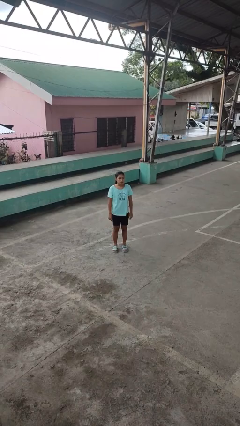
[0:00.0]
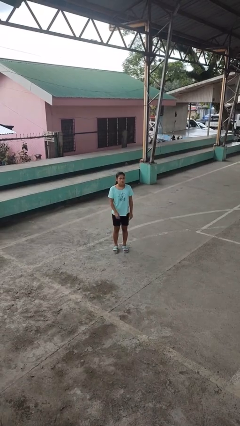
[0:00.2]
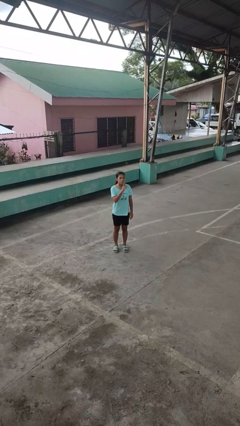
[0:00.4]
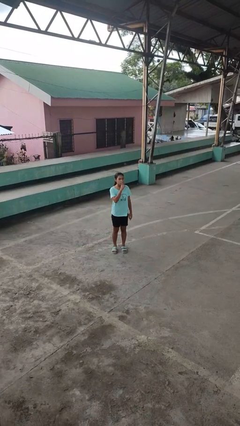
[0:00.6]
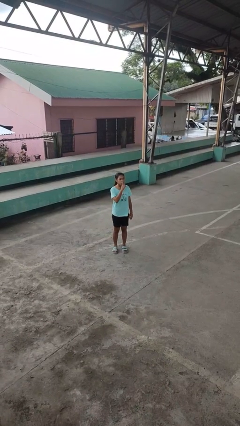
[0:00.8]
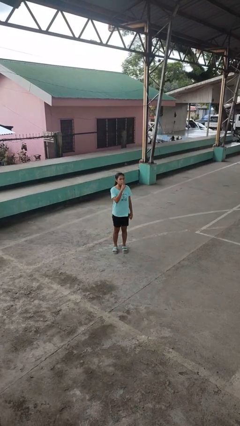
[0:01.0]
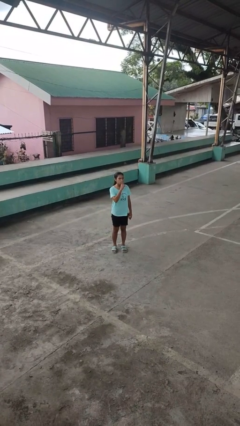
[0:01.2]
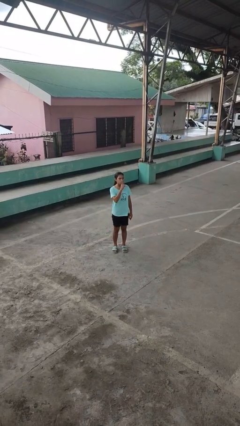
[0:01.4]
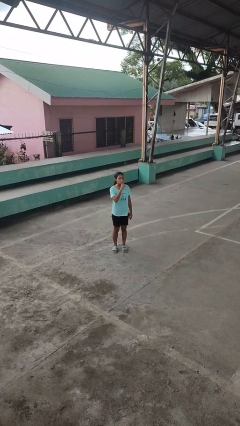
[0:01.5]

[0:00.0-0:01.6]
person gestures be quiet

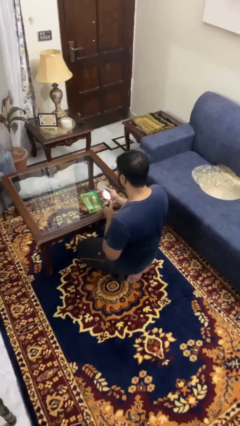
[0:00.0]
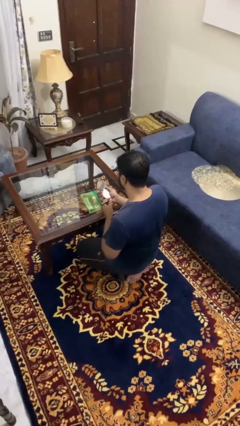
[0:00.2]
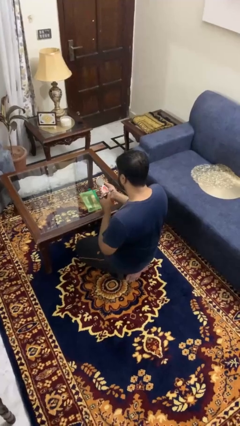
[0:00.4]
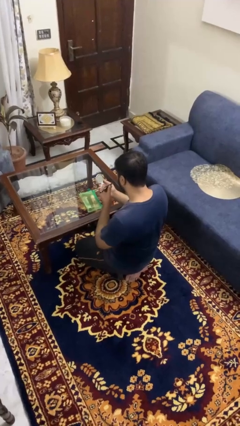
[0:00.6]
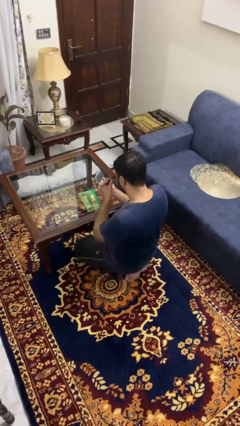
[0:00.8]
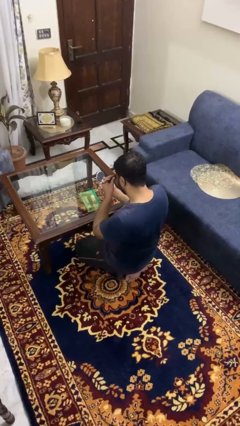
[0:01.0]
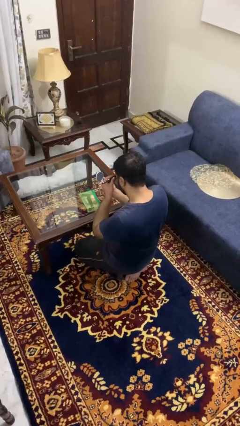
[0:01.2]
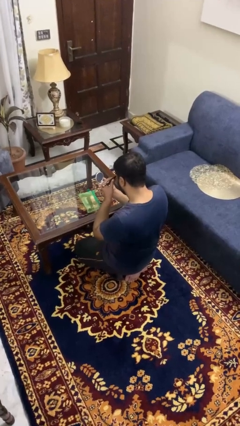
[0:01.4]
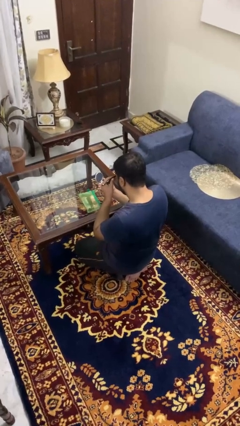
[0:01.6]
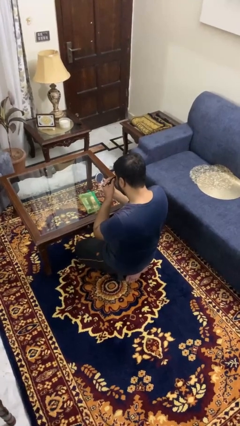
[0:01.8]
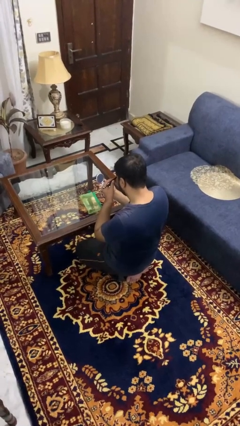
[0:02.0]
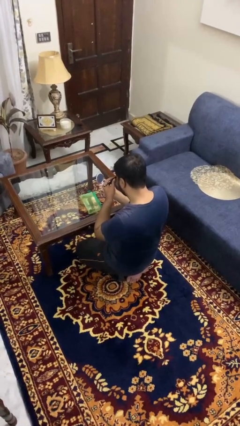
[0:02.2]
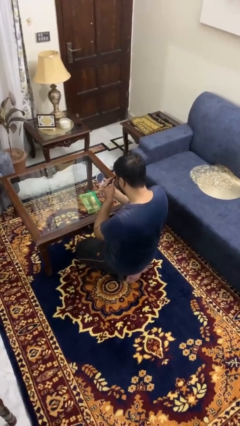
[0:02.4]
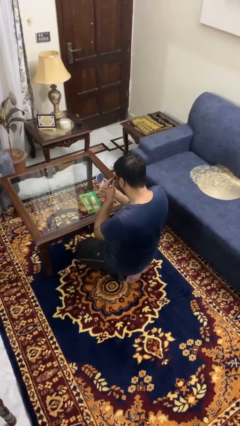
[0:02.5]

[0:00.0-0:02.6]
person applies eye makeup

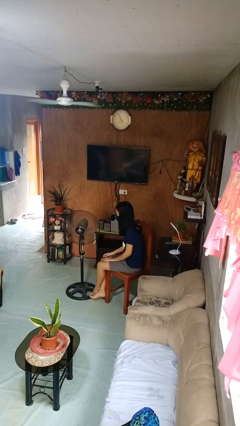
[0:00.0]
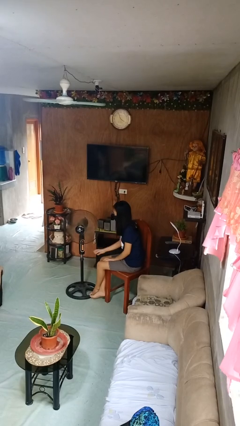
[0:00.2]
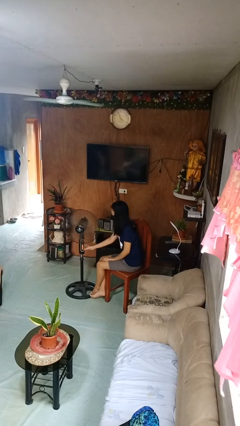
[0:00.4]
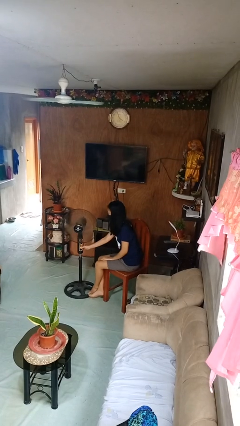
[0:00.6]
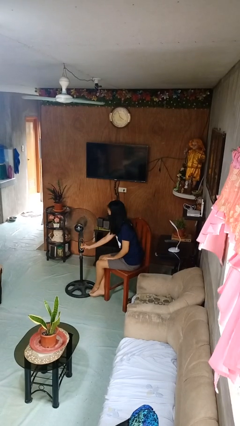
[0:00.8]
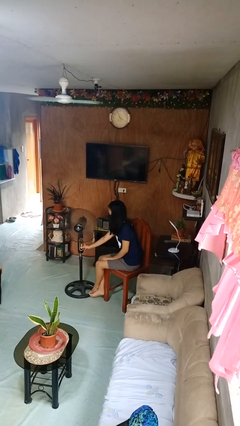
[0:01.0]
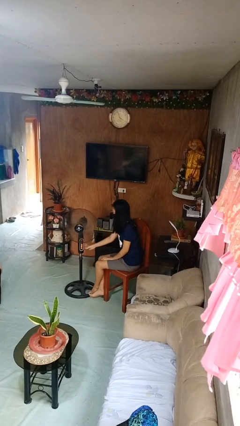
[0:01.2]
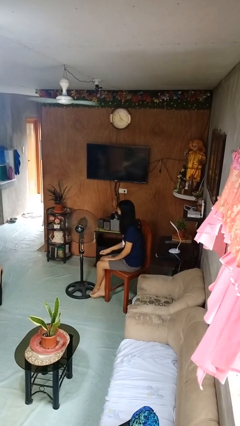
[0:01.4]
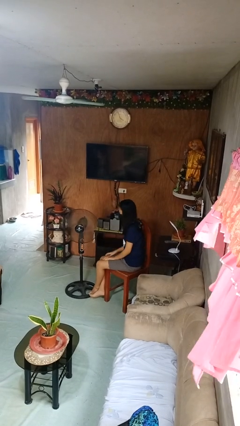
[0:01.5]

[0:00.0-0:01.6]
person turns on fan

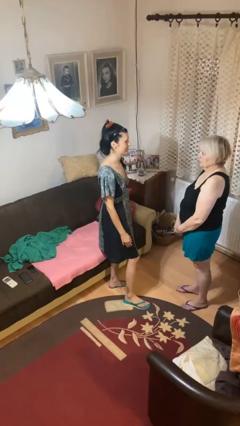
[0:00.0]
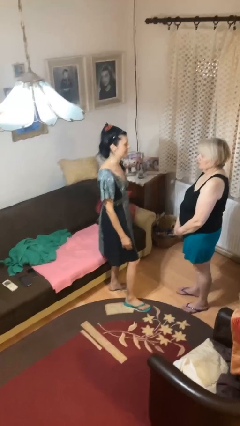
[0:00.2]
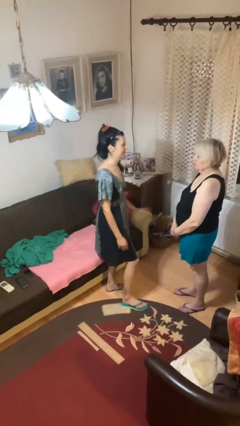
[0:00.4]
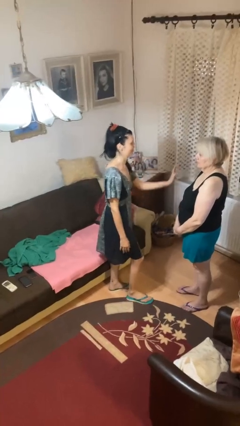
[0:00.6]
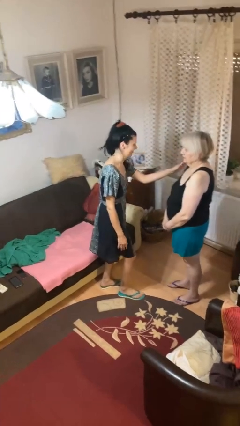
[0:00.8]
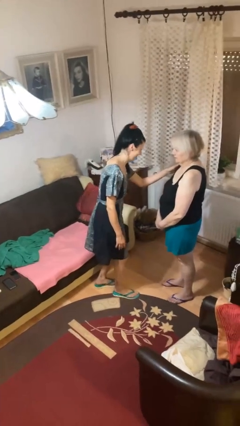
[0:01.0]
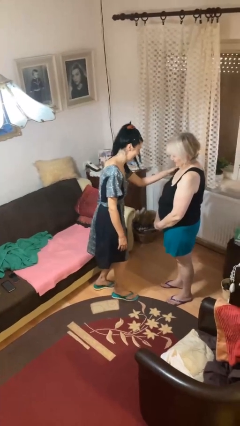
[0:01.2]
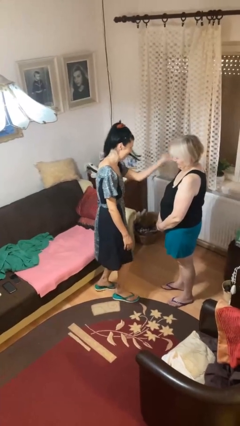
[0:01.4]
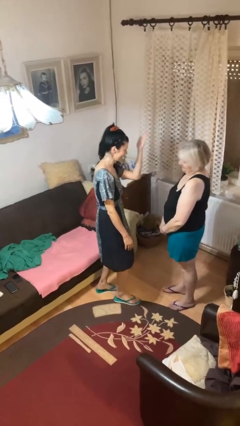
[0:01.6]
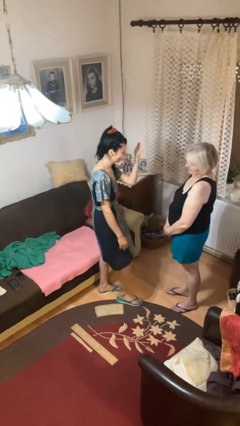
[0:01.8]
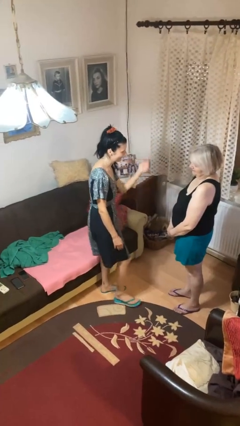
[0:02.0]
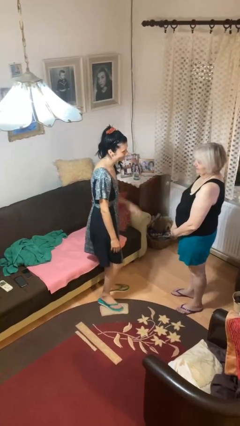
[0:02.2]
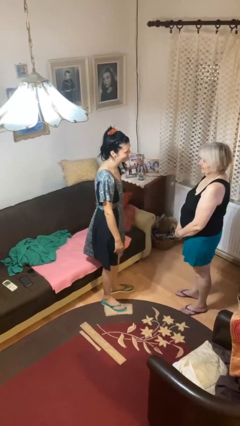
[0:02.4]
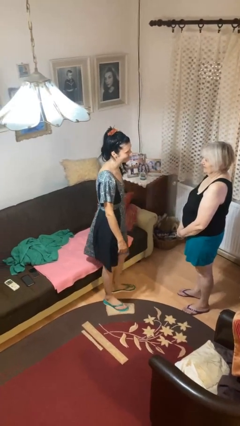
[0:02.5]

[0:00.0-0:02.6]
person shoves person

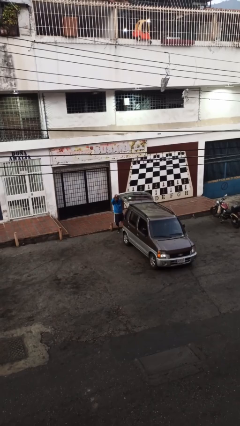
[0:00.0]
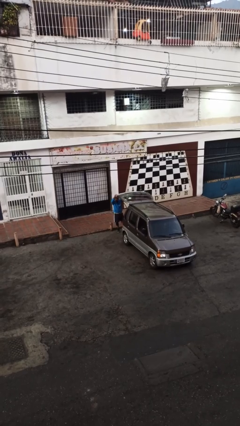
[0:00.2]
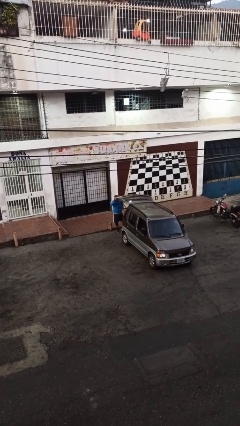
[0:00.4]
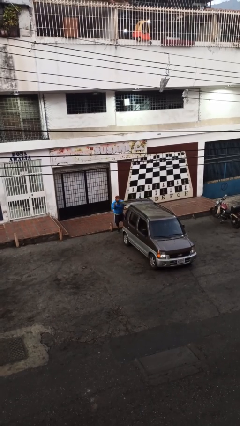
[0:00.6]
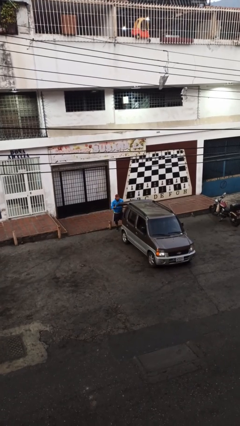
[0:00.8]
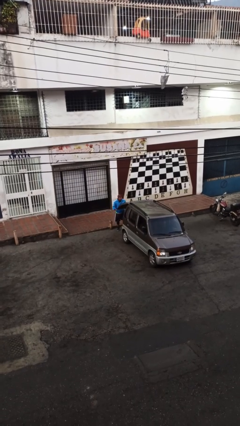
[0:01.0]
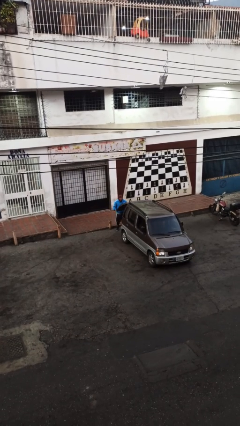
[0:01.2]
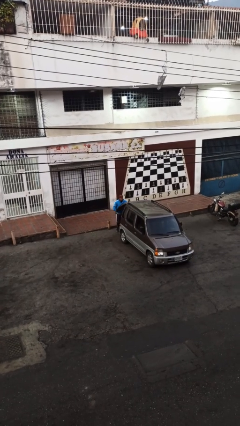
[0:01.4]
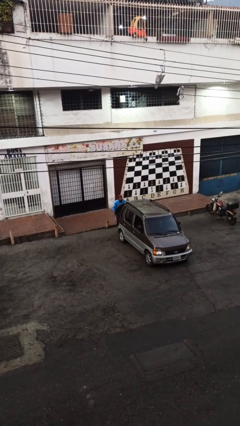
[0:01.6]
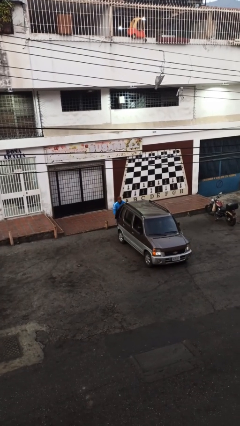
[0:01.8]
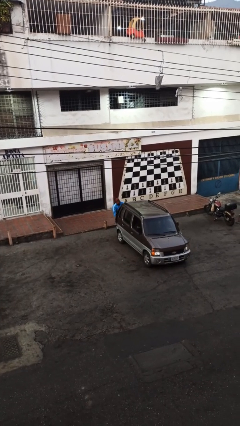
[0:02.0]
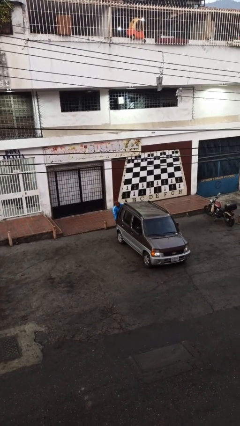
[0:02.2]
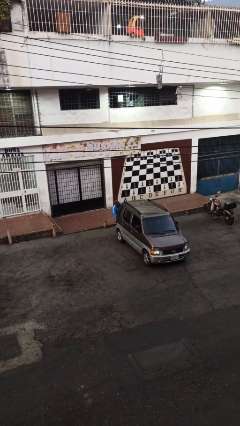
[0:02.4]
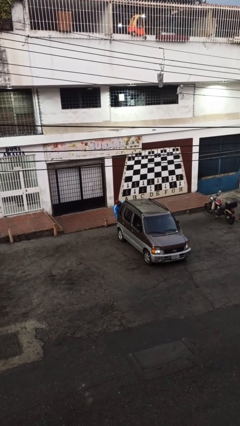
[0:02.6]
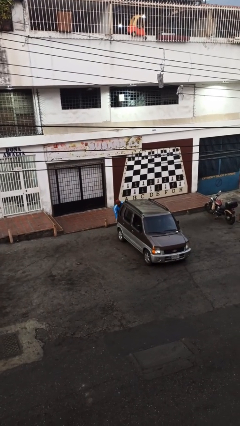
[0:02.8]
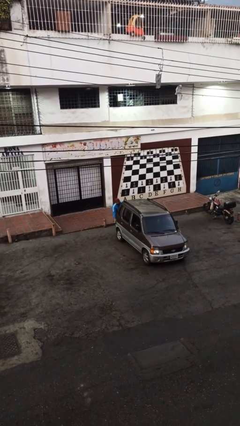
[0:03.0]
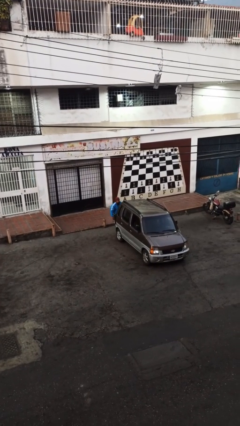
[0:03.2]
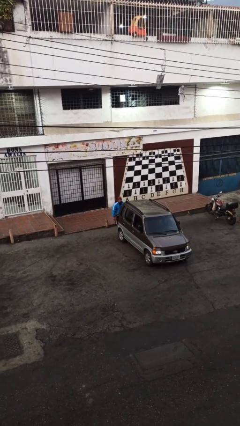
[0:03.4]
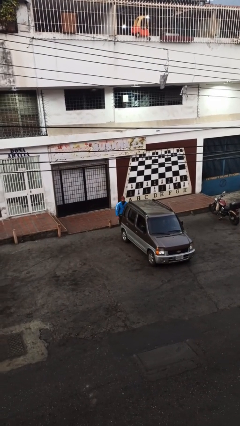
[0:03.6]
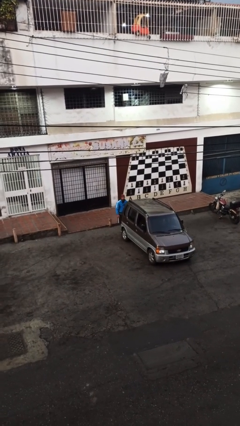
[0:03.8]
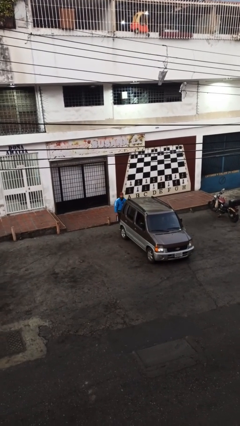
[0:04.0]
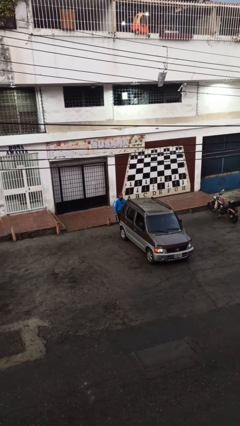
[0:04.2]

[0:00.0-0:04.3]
person closes car trunk

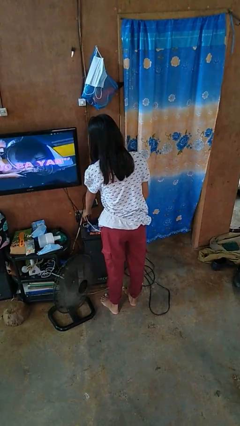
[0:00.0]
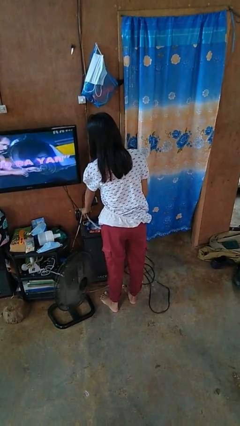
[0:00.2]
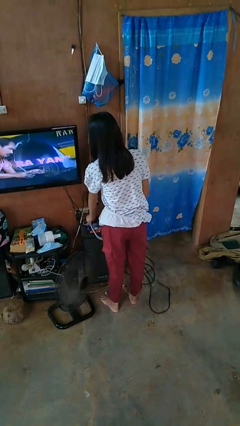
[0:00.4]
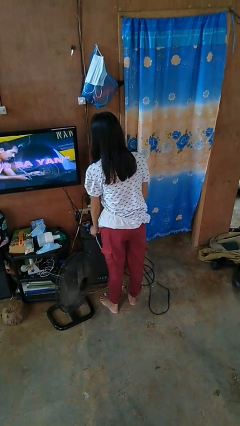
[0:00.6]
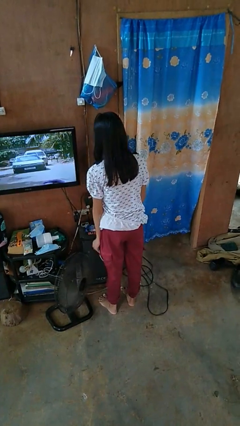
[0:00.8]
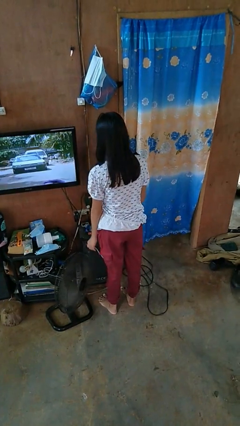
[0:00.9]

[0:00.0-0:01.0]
person unplugs from electrical socket

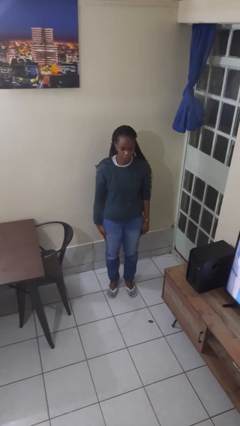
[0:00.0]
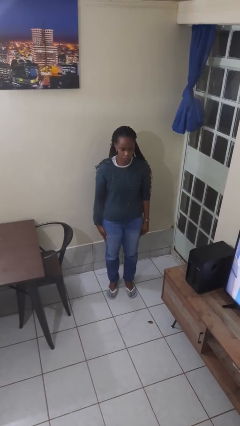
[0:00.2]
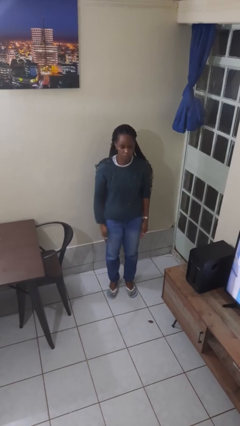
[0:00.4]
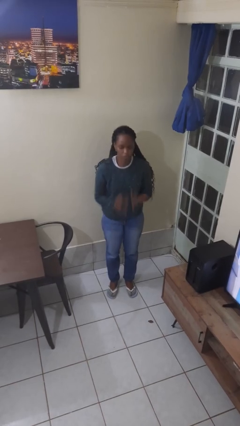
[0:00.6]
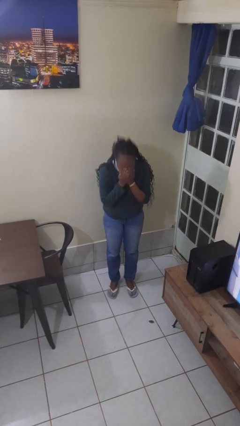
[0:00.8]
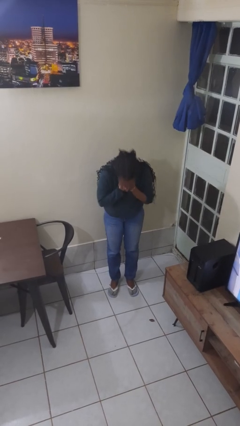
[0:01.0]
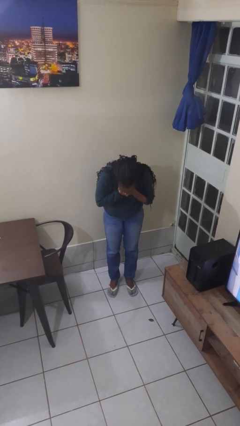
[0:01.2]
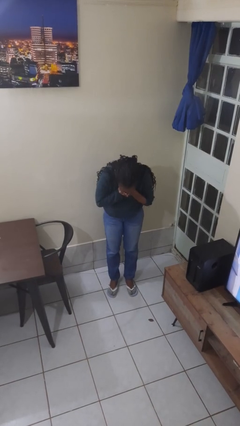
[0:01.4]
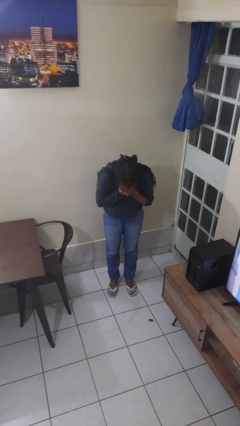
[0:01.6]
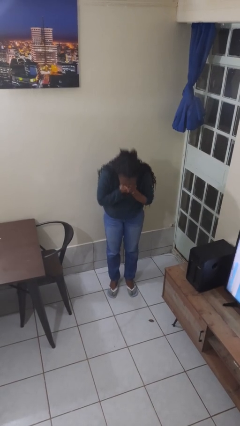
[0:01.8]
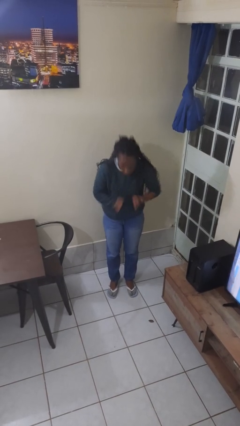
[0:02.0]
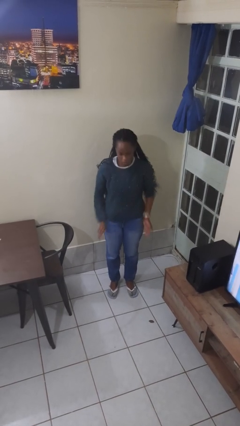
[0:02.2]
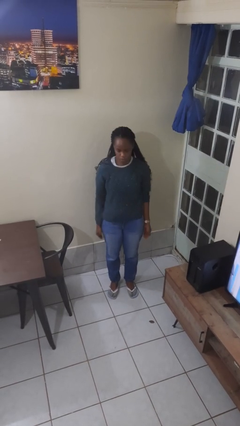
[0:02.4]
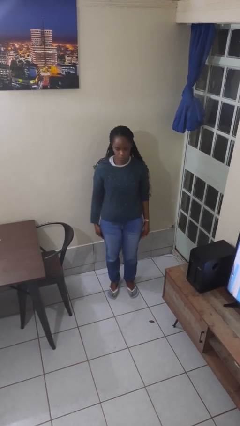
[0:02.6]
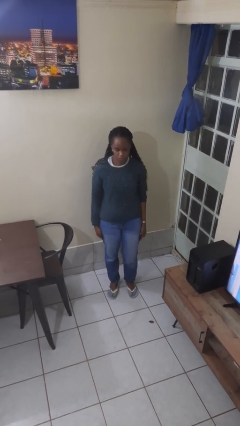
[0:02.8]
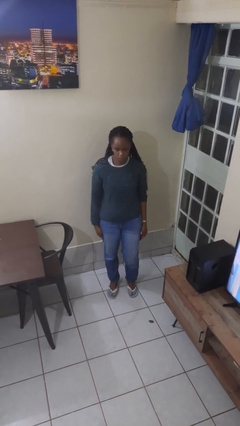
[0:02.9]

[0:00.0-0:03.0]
person sneezes into hand

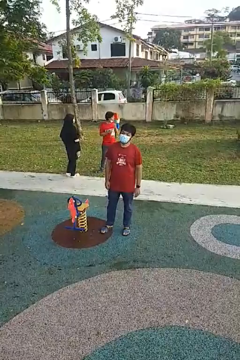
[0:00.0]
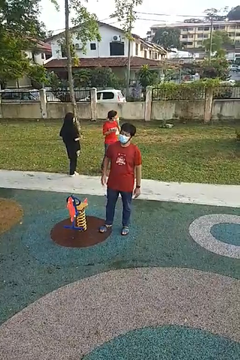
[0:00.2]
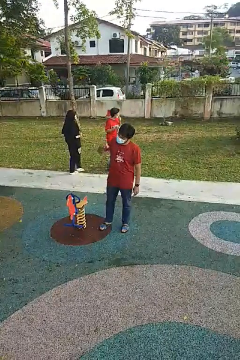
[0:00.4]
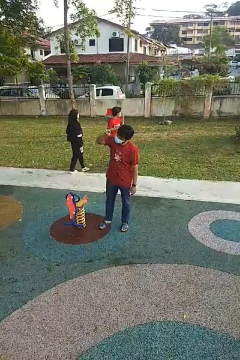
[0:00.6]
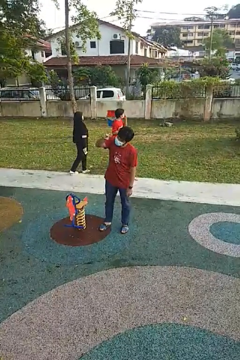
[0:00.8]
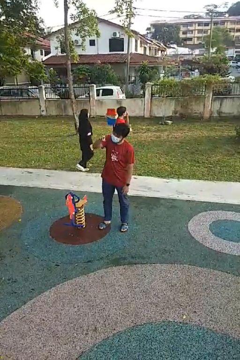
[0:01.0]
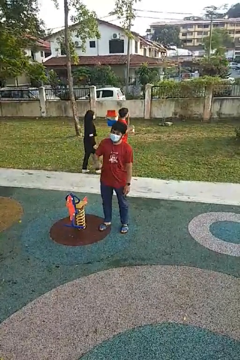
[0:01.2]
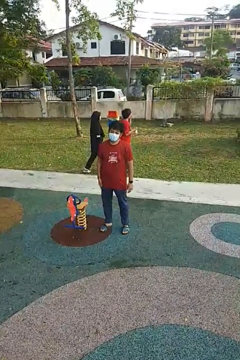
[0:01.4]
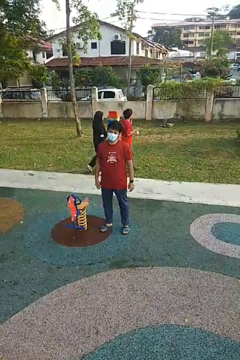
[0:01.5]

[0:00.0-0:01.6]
person points at person
